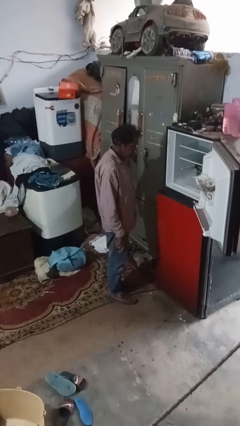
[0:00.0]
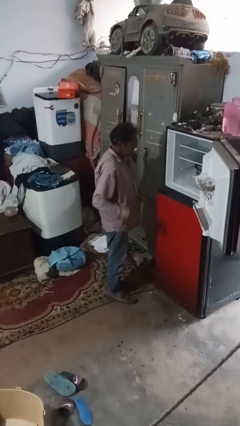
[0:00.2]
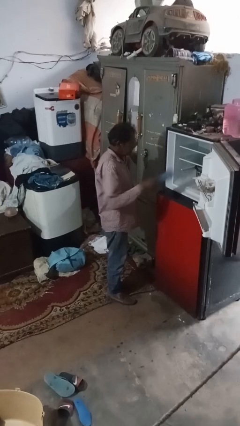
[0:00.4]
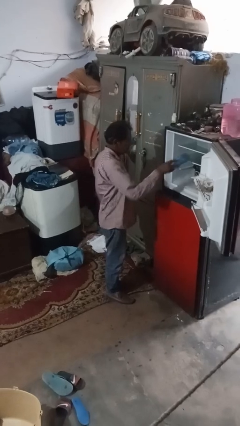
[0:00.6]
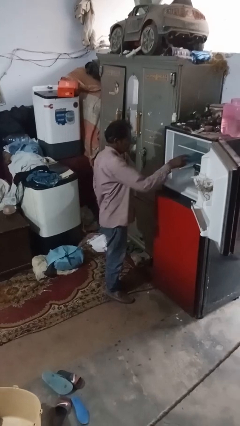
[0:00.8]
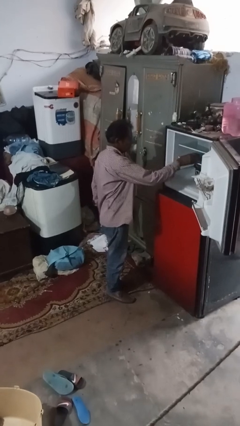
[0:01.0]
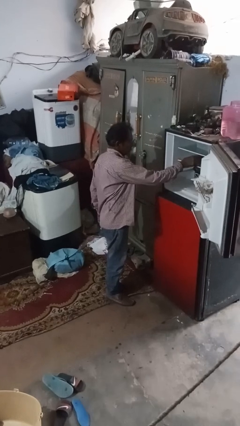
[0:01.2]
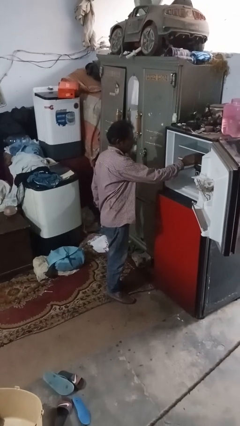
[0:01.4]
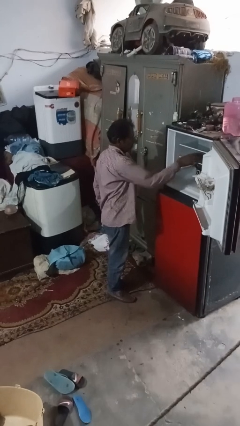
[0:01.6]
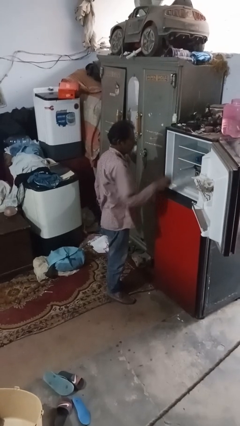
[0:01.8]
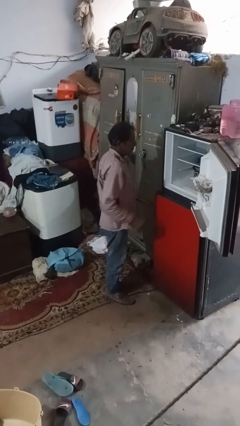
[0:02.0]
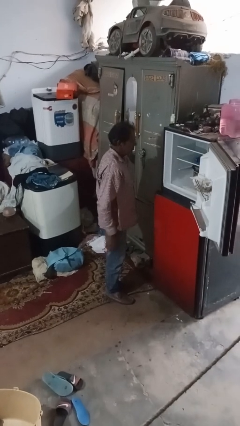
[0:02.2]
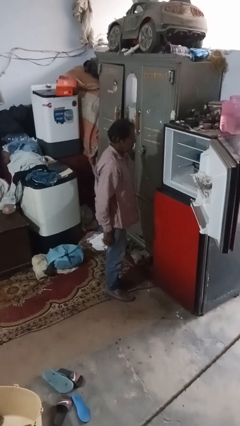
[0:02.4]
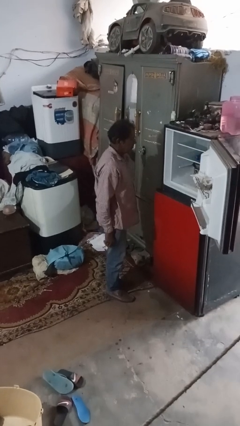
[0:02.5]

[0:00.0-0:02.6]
person puts object into refrigerator

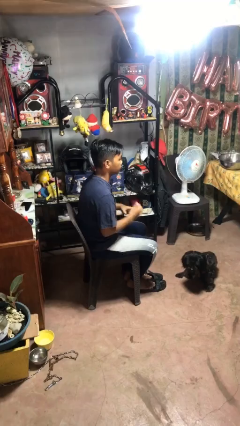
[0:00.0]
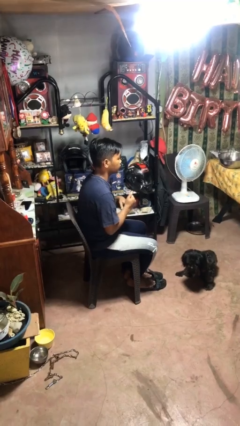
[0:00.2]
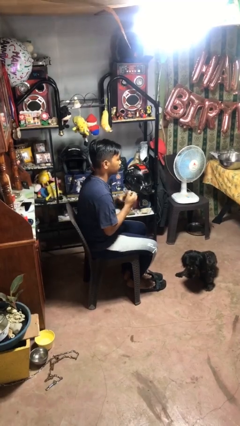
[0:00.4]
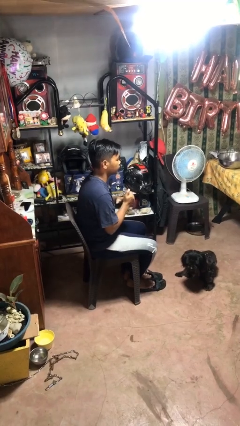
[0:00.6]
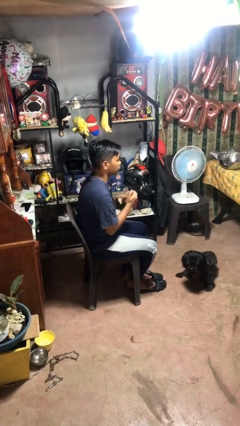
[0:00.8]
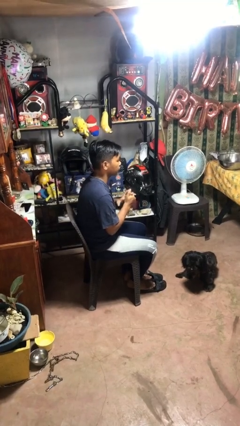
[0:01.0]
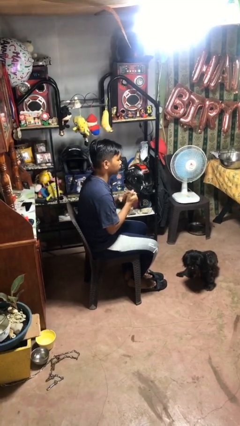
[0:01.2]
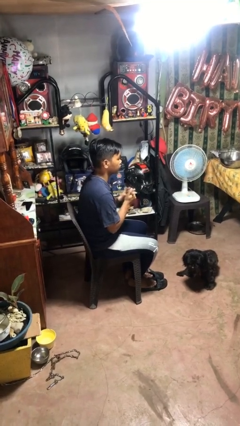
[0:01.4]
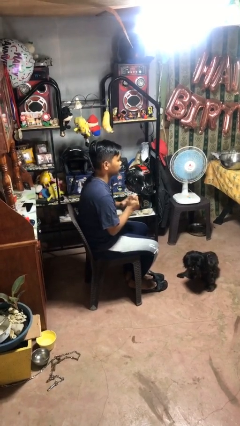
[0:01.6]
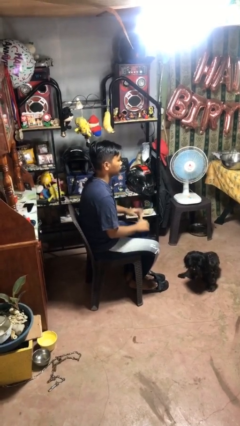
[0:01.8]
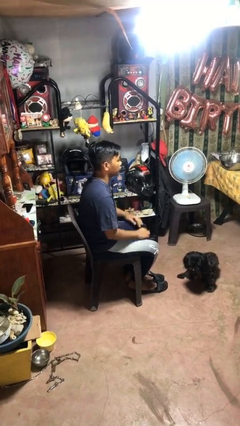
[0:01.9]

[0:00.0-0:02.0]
person cracks knuckles

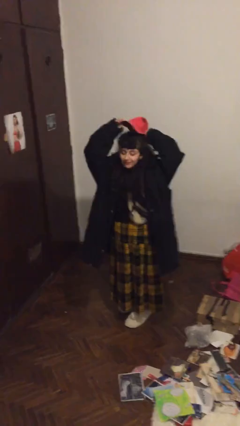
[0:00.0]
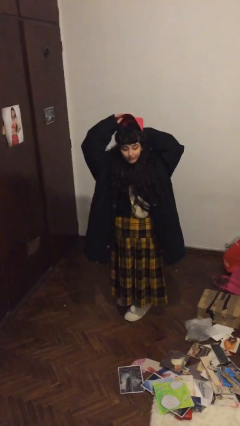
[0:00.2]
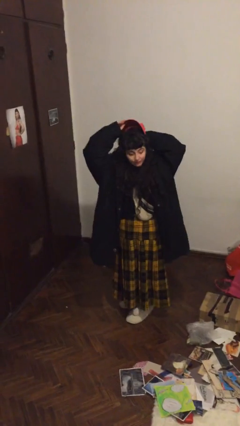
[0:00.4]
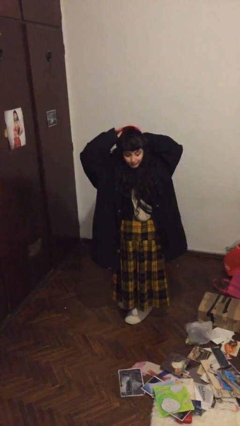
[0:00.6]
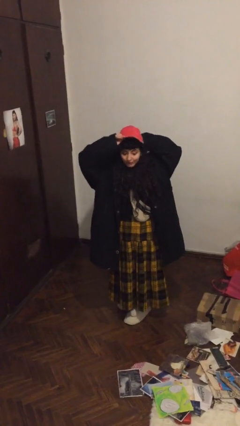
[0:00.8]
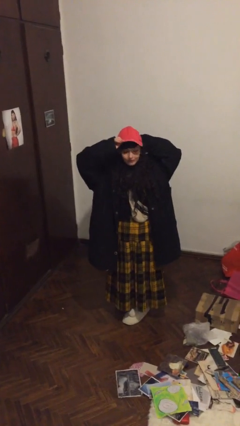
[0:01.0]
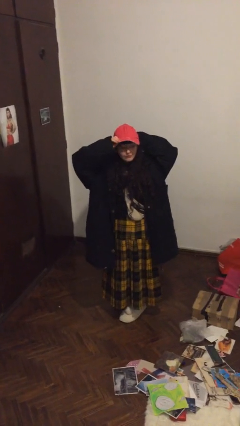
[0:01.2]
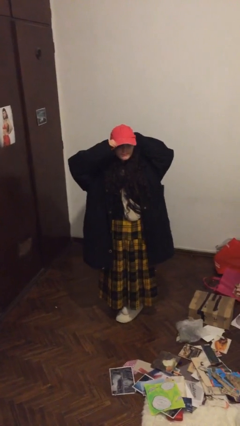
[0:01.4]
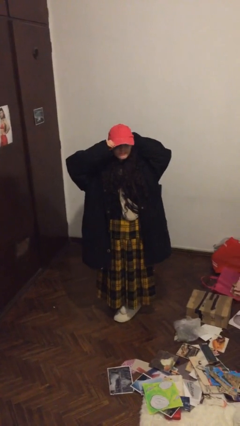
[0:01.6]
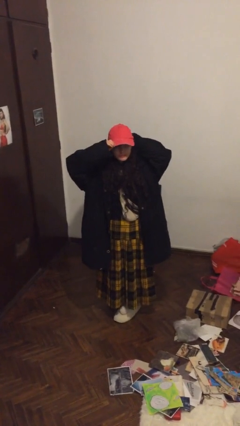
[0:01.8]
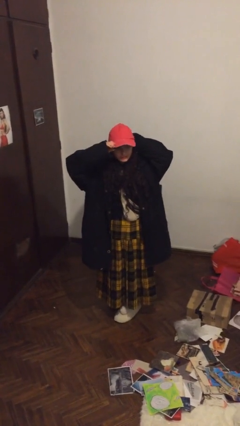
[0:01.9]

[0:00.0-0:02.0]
person puts on hat

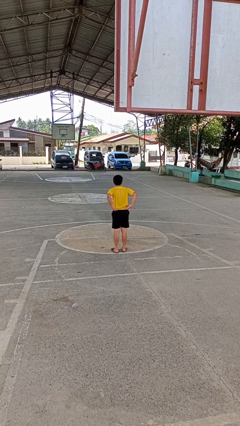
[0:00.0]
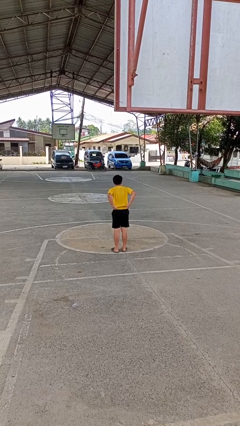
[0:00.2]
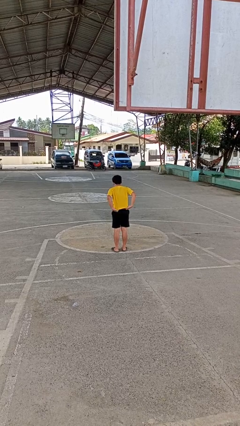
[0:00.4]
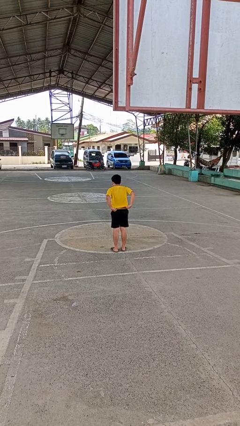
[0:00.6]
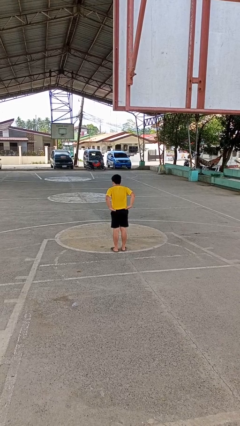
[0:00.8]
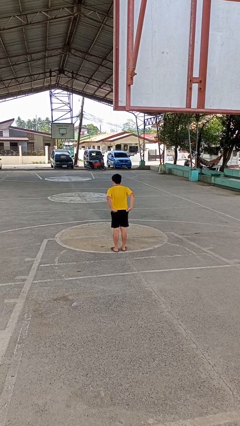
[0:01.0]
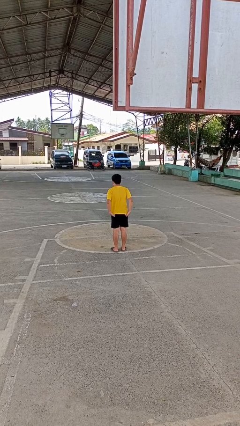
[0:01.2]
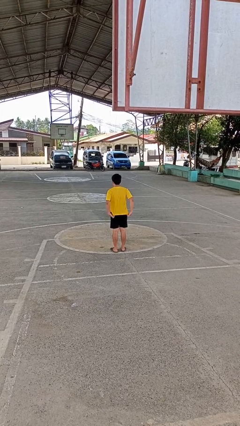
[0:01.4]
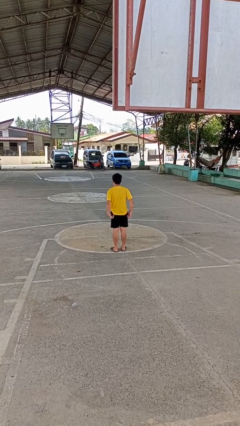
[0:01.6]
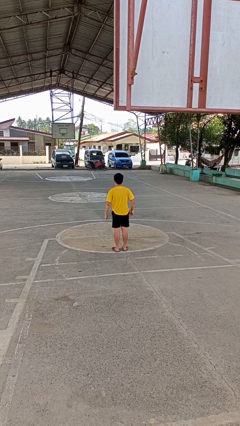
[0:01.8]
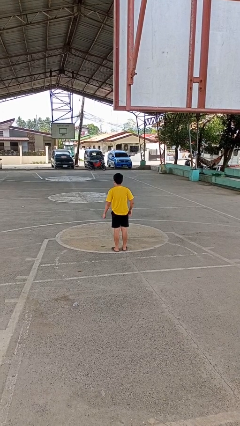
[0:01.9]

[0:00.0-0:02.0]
person untucks shirt

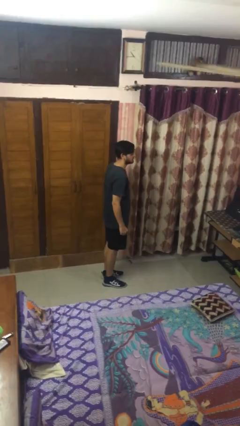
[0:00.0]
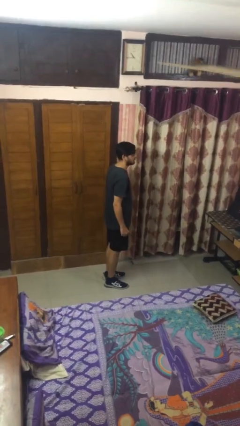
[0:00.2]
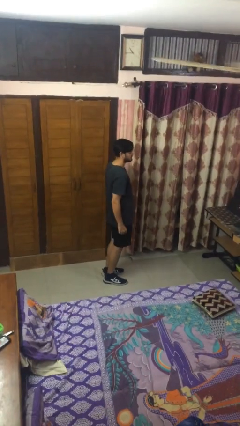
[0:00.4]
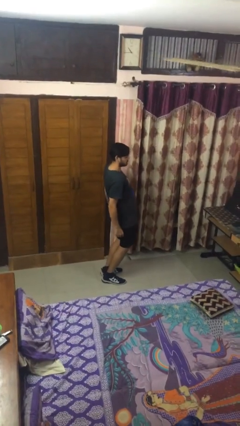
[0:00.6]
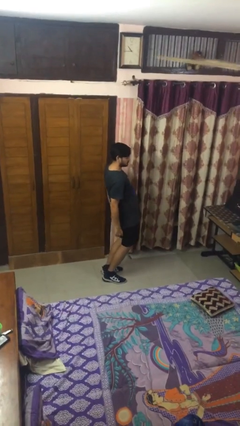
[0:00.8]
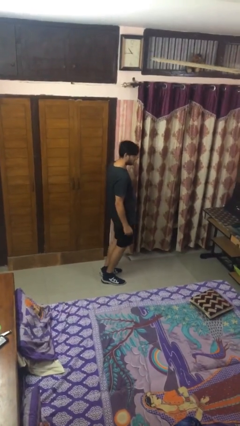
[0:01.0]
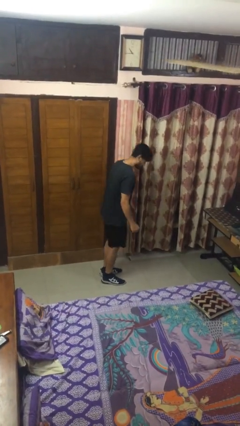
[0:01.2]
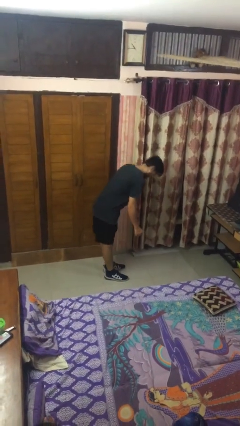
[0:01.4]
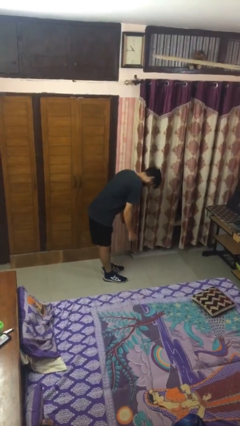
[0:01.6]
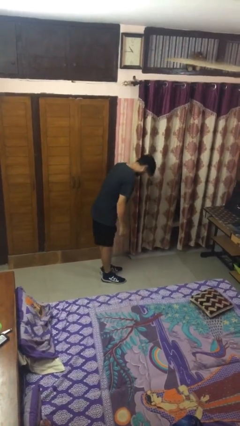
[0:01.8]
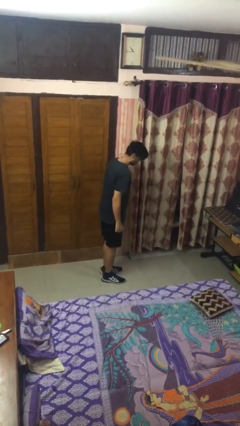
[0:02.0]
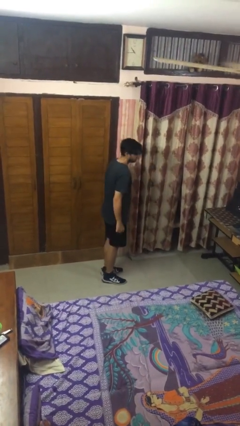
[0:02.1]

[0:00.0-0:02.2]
person wiggles hips

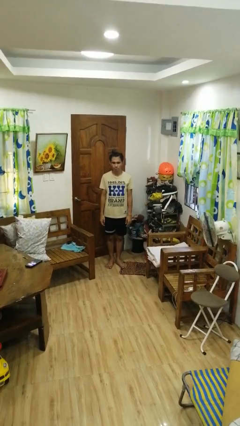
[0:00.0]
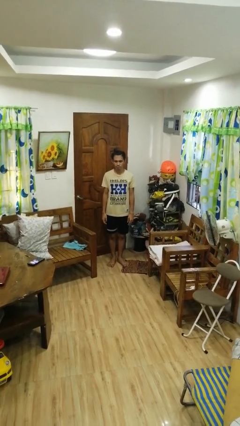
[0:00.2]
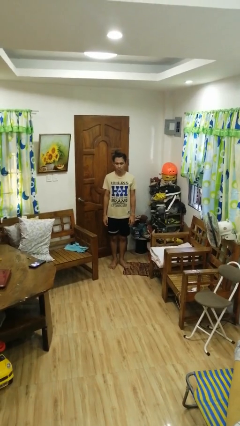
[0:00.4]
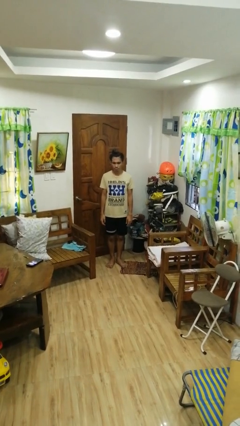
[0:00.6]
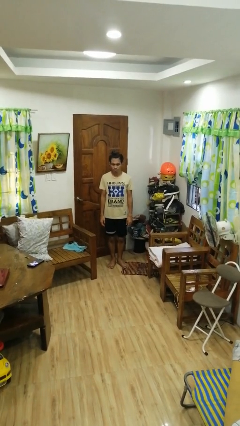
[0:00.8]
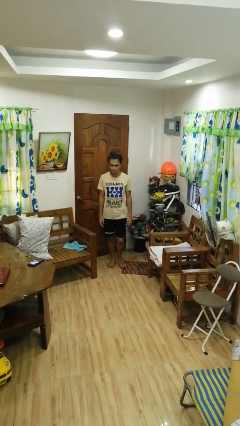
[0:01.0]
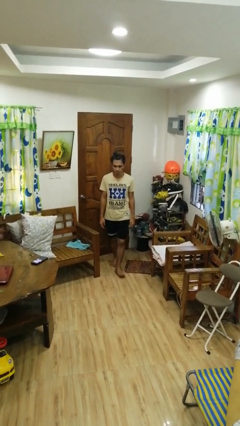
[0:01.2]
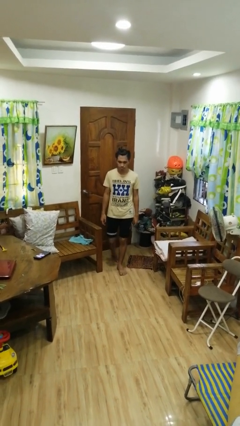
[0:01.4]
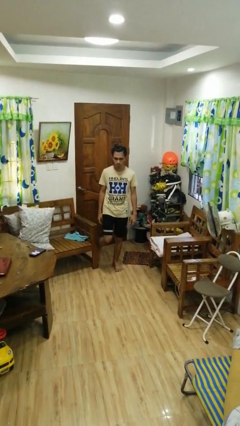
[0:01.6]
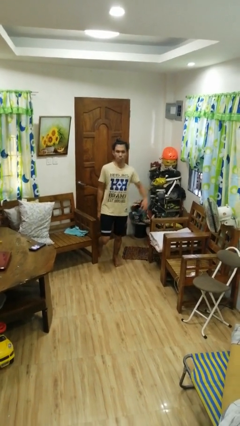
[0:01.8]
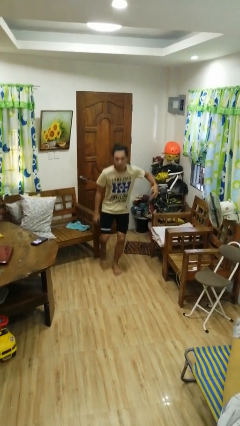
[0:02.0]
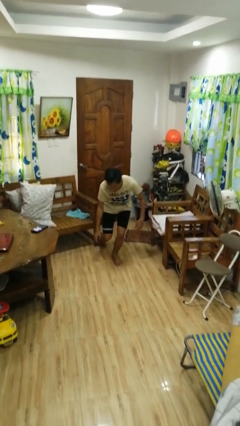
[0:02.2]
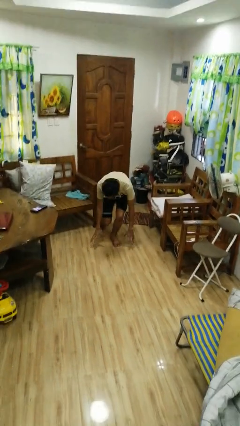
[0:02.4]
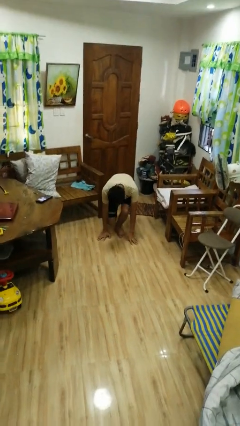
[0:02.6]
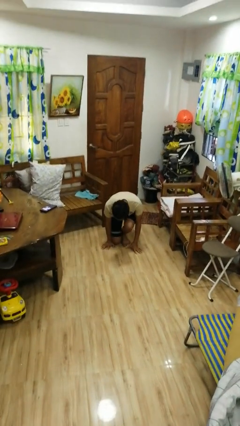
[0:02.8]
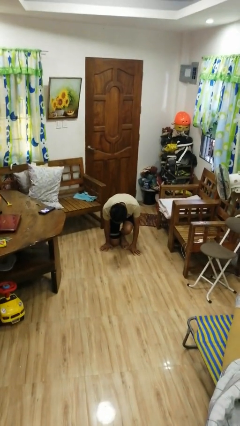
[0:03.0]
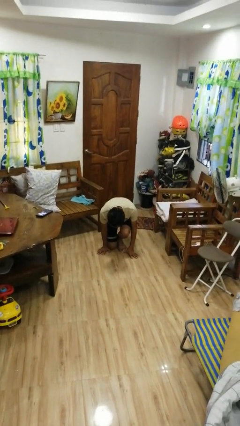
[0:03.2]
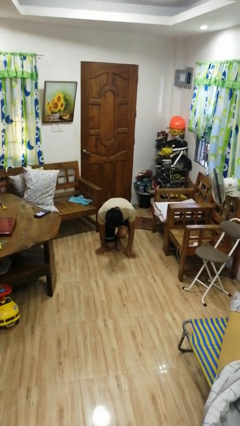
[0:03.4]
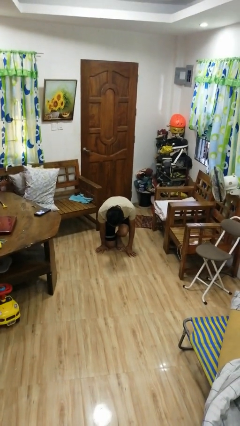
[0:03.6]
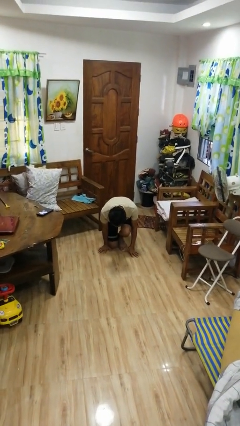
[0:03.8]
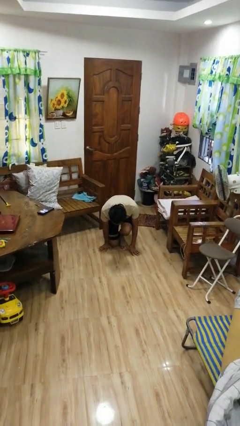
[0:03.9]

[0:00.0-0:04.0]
person trips on object on floor

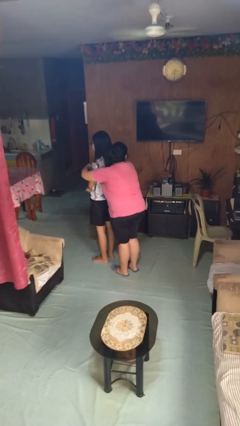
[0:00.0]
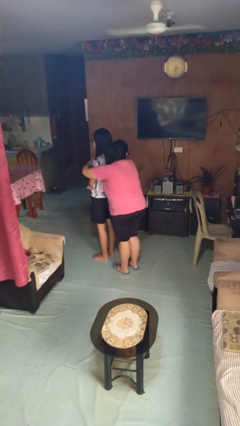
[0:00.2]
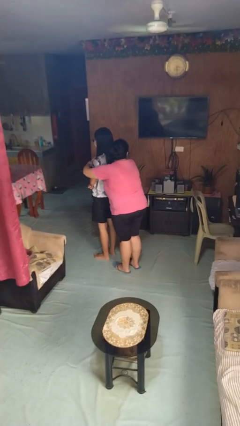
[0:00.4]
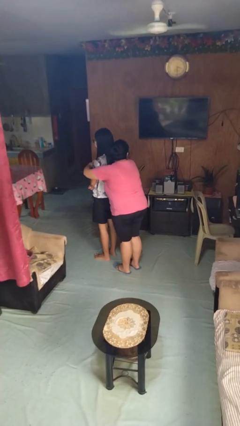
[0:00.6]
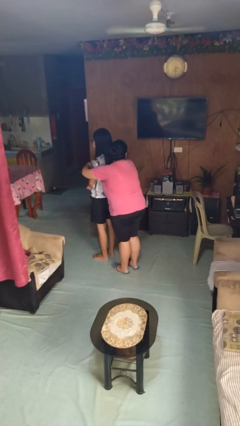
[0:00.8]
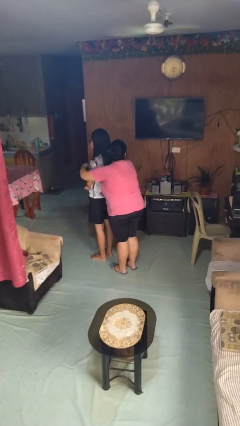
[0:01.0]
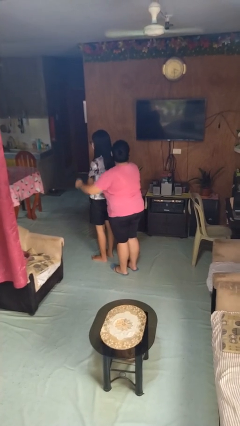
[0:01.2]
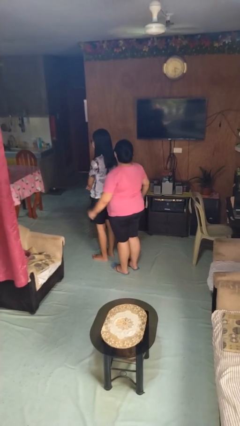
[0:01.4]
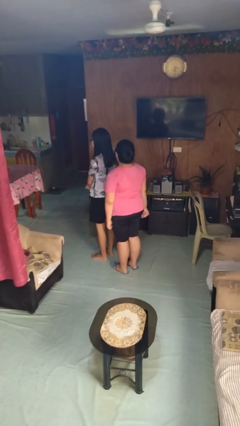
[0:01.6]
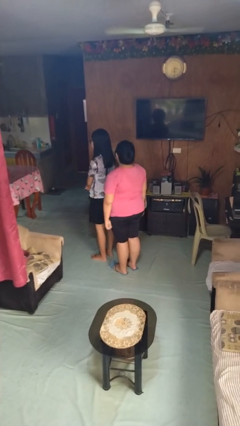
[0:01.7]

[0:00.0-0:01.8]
person hugs person from behind
